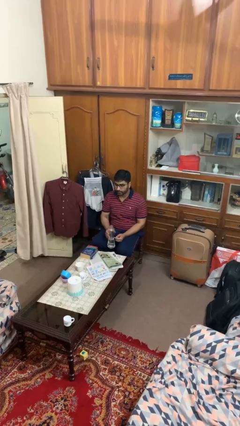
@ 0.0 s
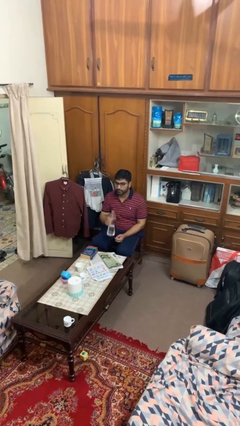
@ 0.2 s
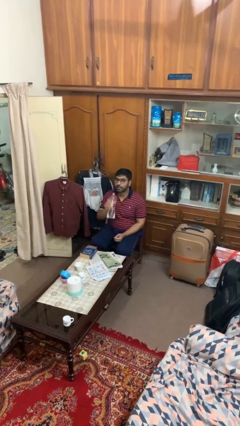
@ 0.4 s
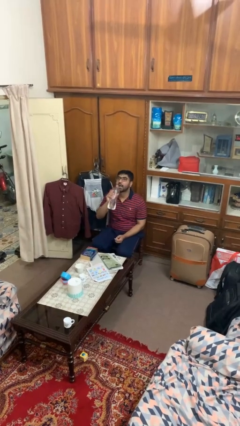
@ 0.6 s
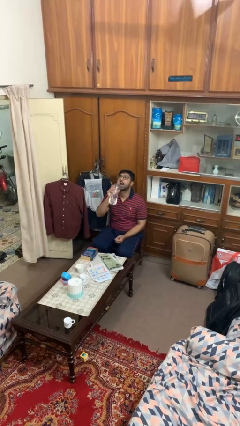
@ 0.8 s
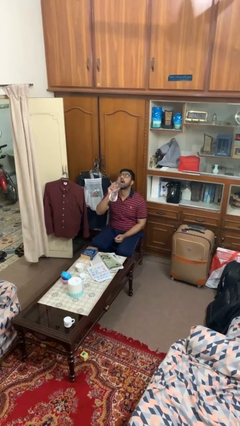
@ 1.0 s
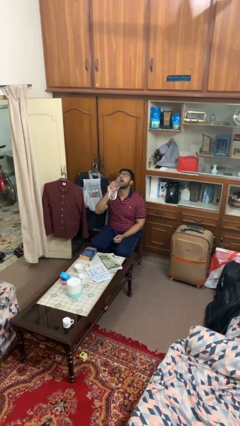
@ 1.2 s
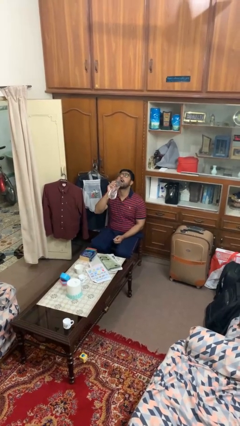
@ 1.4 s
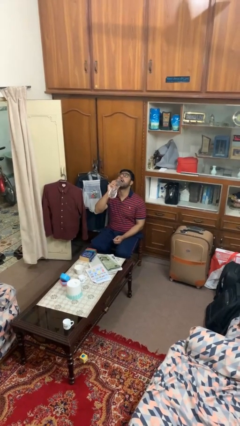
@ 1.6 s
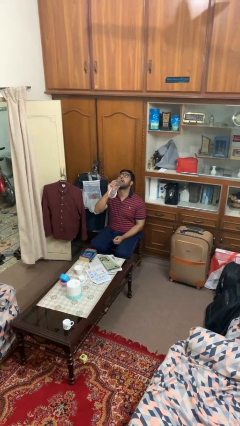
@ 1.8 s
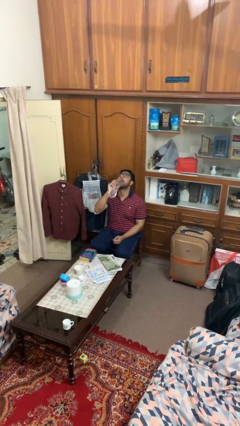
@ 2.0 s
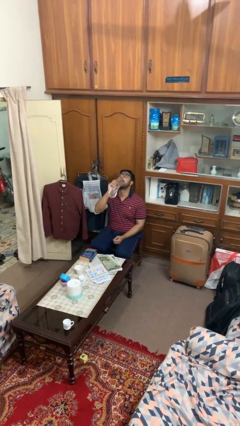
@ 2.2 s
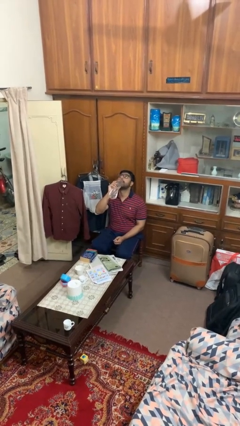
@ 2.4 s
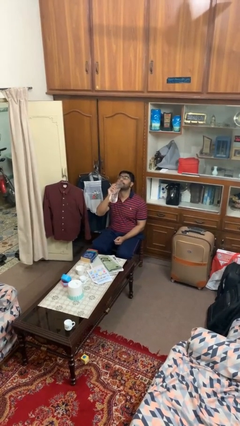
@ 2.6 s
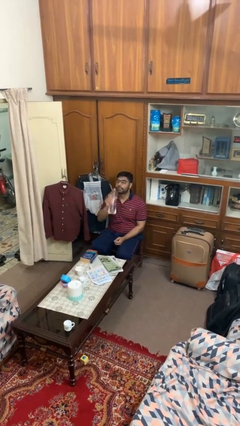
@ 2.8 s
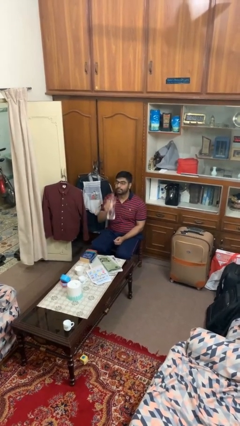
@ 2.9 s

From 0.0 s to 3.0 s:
person drinks from bottle

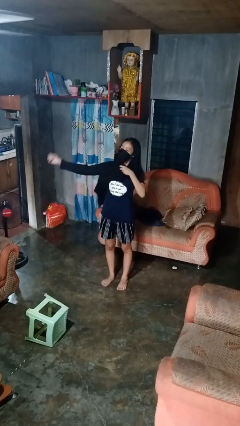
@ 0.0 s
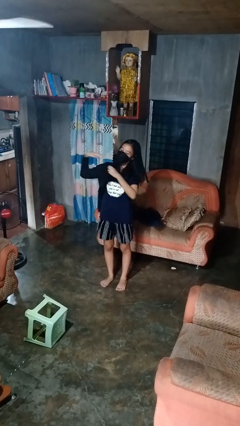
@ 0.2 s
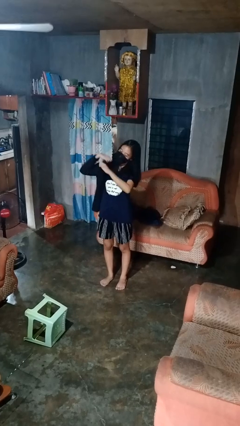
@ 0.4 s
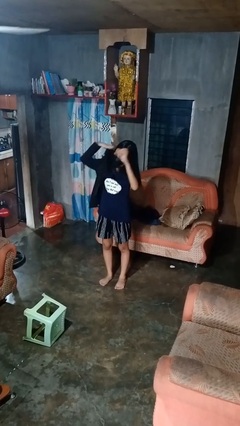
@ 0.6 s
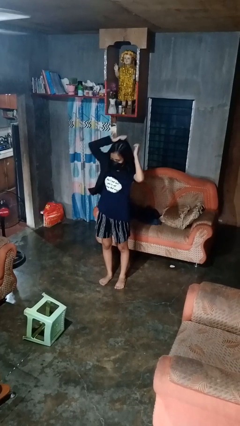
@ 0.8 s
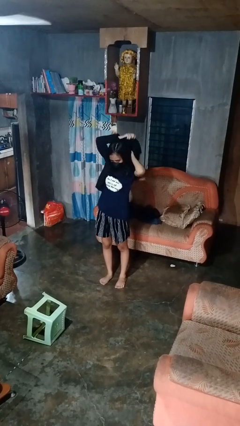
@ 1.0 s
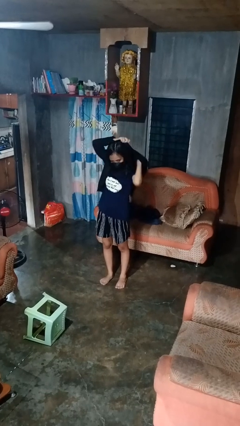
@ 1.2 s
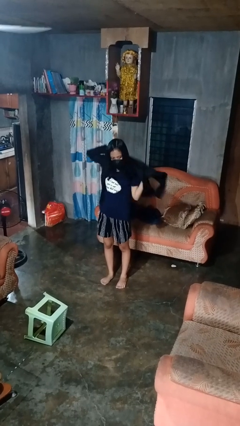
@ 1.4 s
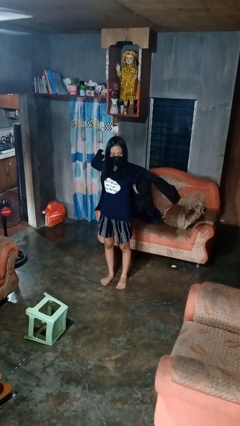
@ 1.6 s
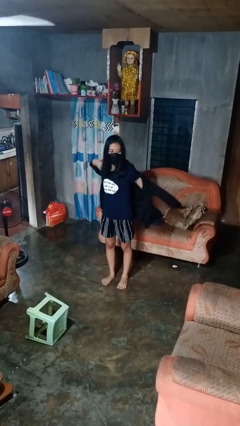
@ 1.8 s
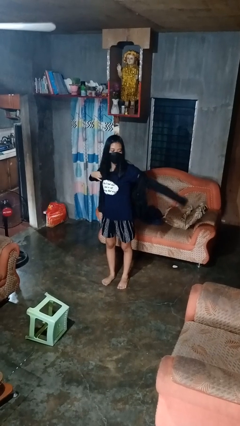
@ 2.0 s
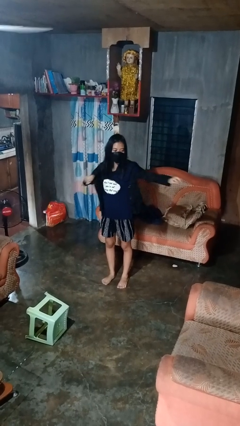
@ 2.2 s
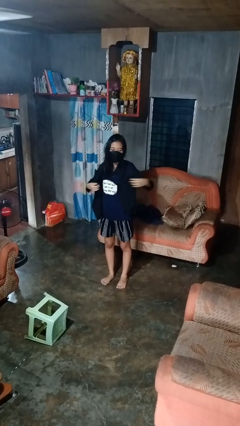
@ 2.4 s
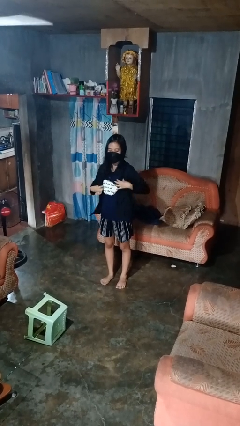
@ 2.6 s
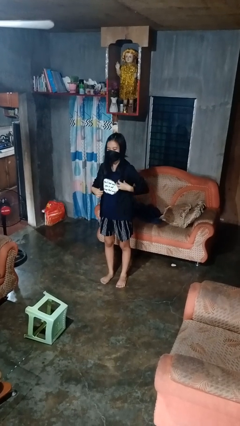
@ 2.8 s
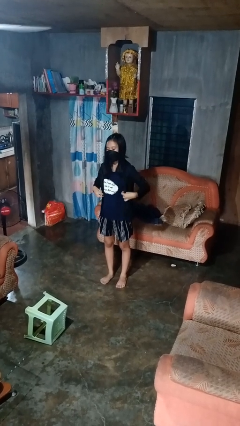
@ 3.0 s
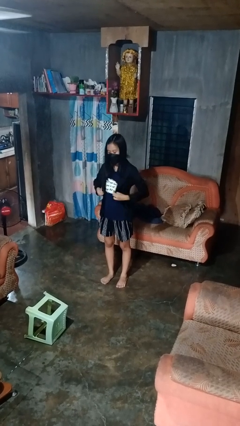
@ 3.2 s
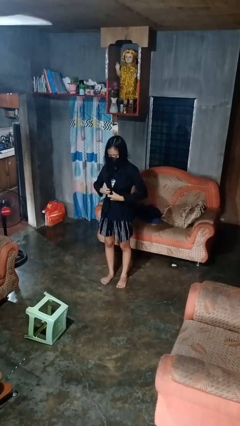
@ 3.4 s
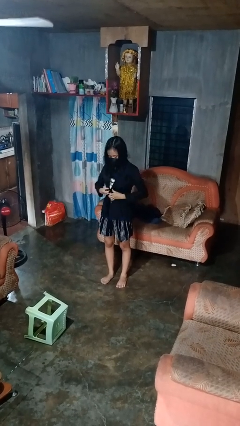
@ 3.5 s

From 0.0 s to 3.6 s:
person puts on shirt

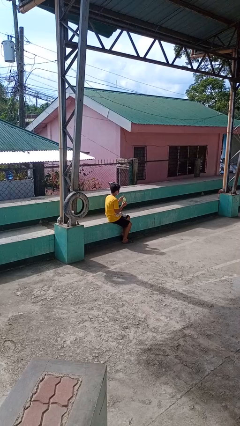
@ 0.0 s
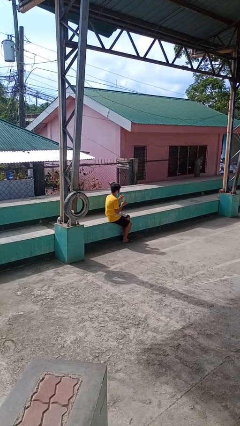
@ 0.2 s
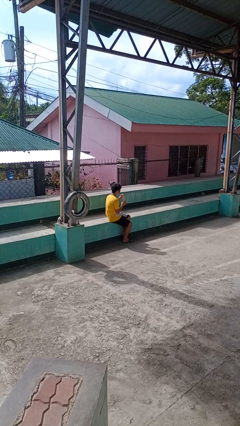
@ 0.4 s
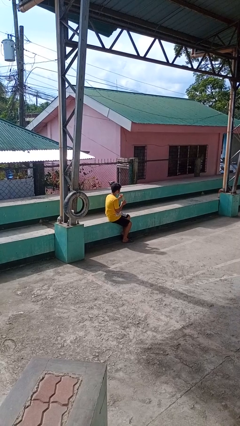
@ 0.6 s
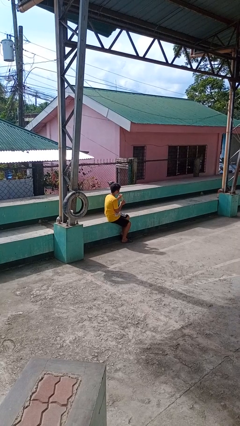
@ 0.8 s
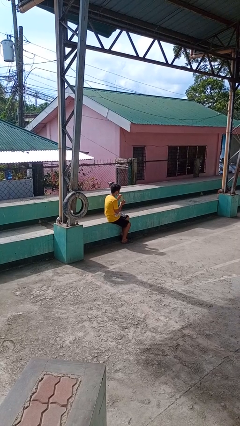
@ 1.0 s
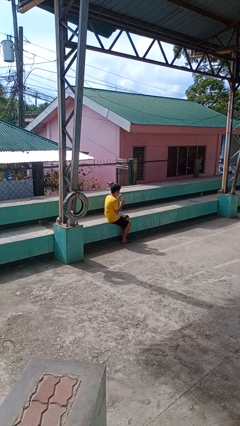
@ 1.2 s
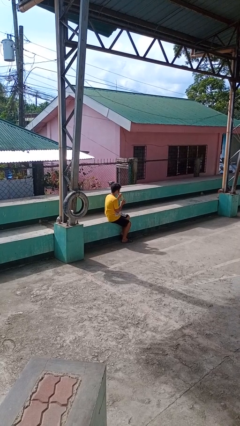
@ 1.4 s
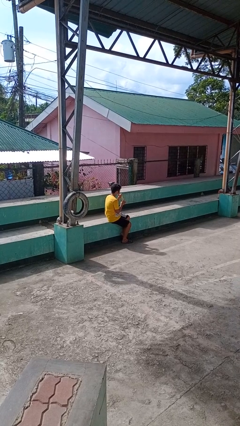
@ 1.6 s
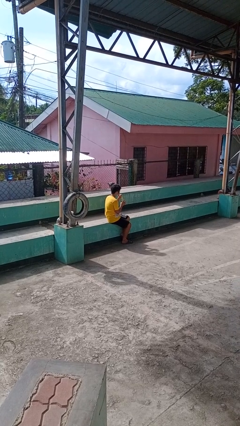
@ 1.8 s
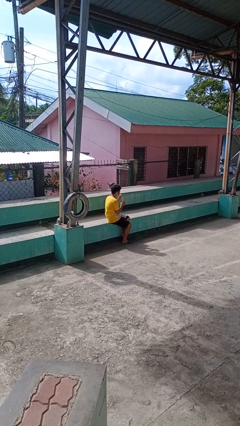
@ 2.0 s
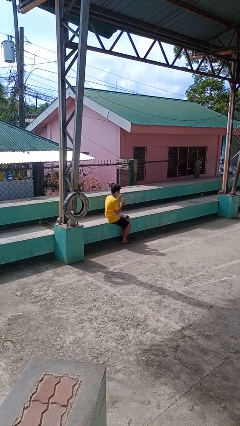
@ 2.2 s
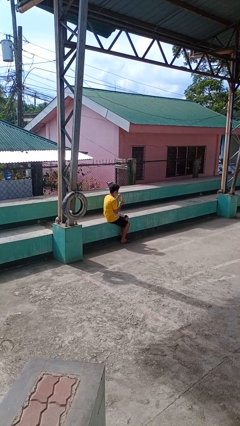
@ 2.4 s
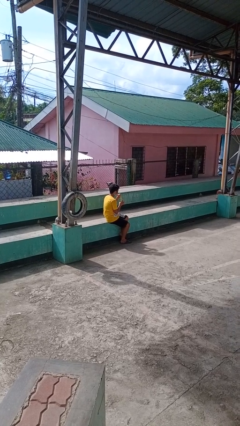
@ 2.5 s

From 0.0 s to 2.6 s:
person drinks from straw

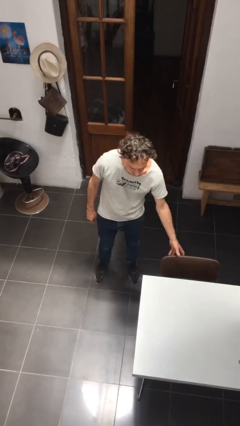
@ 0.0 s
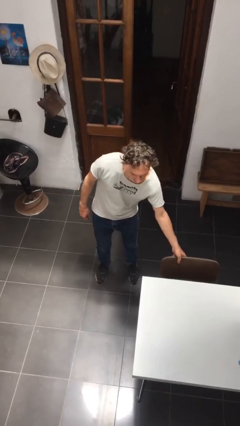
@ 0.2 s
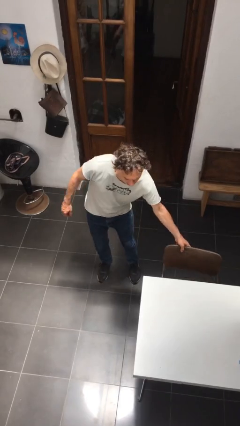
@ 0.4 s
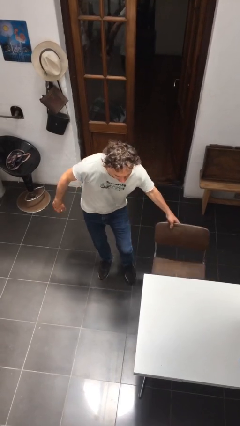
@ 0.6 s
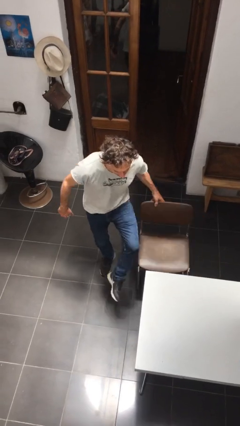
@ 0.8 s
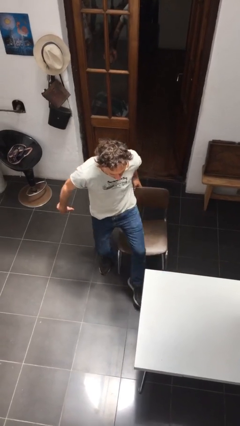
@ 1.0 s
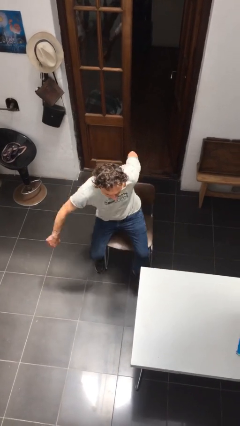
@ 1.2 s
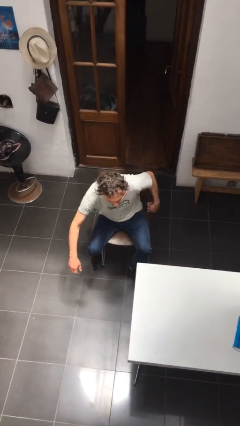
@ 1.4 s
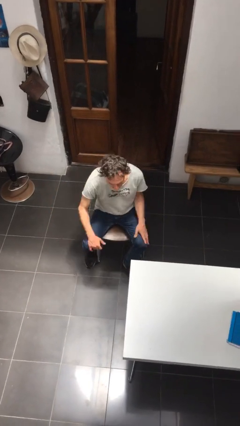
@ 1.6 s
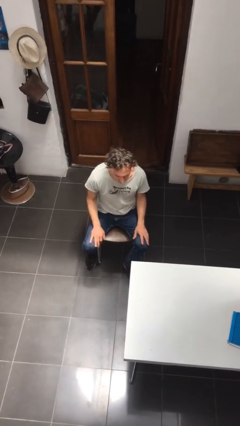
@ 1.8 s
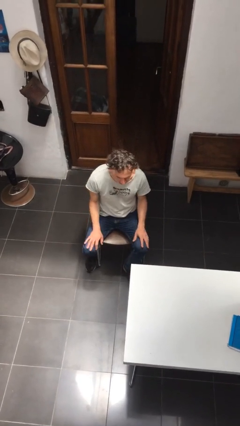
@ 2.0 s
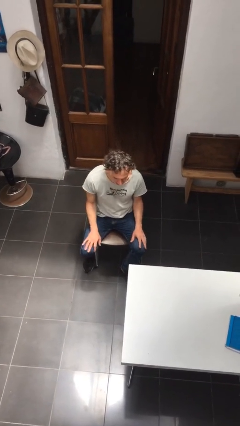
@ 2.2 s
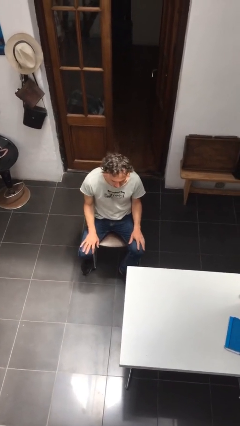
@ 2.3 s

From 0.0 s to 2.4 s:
person sits down

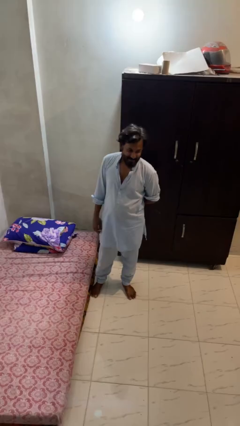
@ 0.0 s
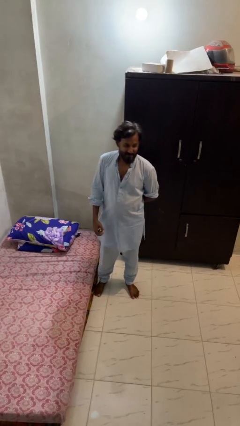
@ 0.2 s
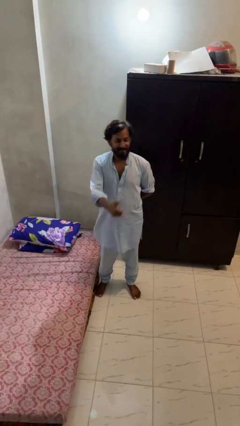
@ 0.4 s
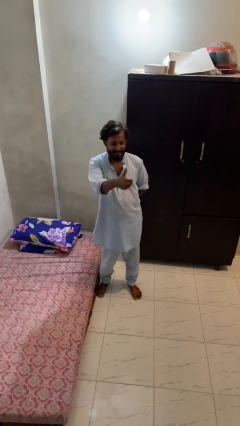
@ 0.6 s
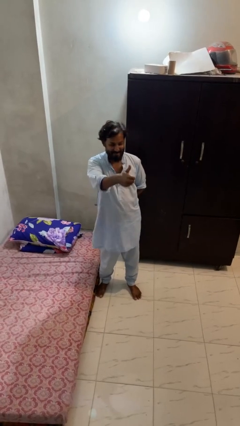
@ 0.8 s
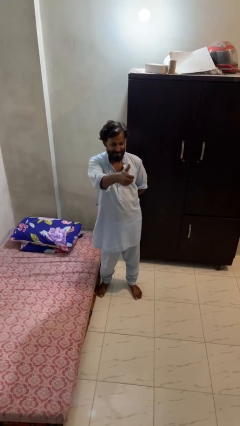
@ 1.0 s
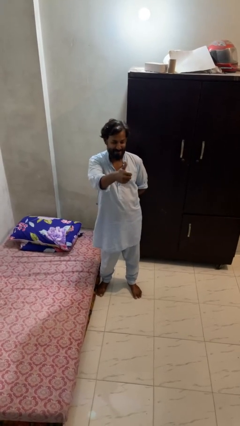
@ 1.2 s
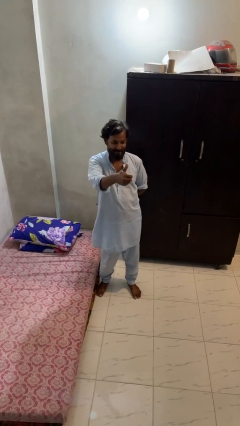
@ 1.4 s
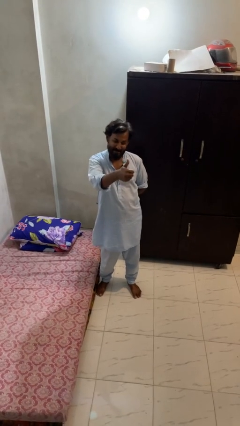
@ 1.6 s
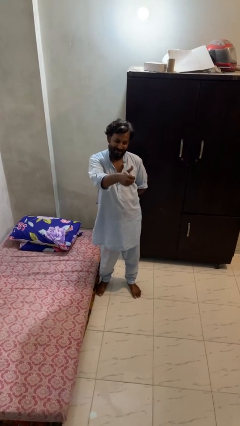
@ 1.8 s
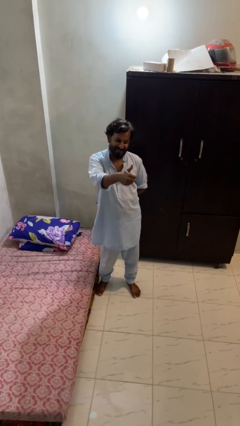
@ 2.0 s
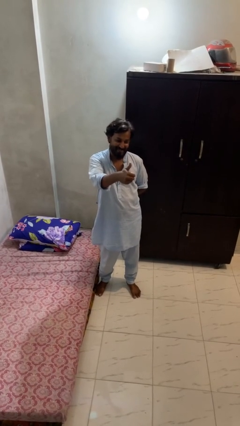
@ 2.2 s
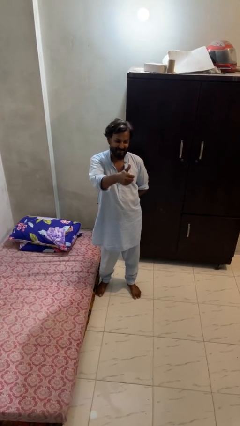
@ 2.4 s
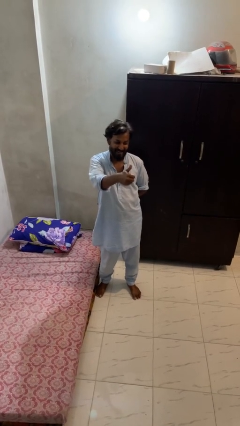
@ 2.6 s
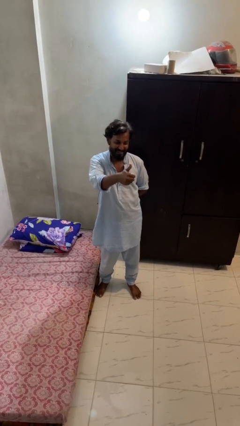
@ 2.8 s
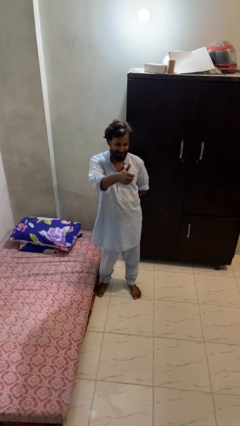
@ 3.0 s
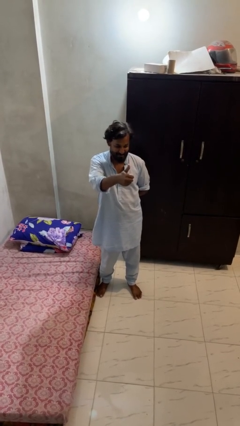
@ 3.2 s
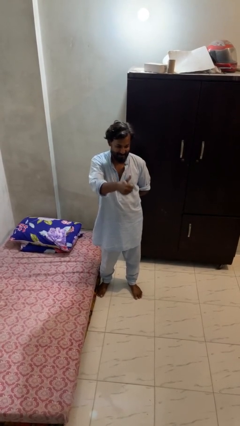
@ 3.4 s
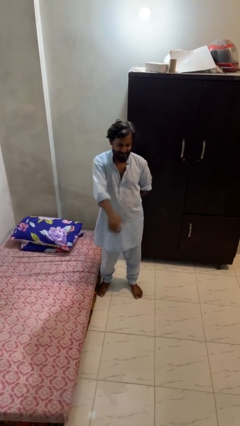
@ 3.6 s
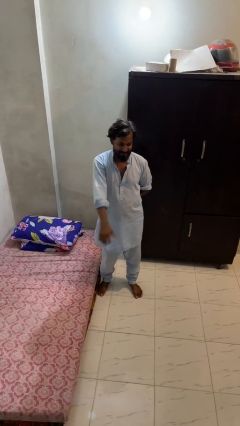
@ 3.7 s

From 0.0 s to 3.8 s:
person gestures thumbs up

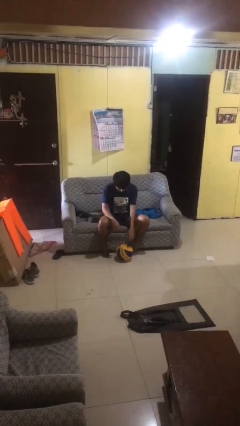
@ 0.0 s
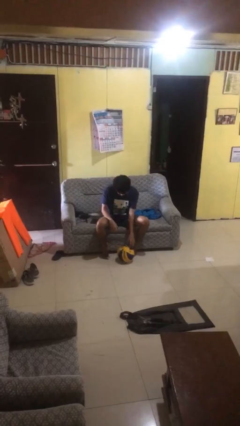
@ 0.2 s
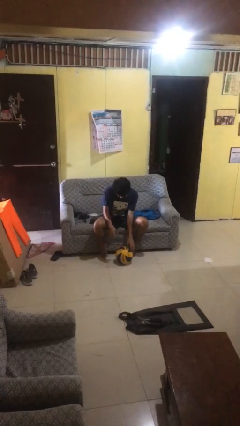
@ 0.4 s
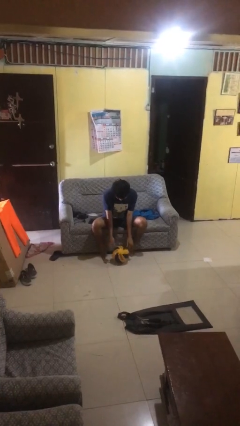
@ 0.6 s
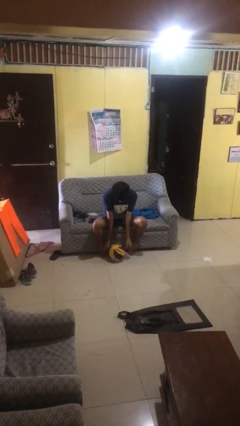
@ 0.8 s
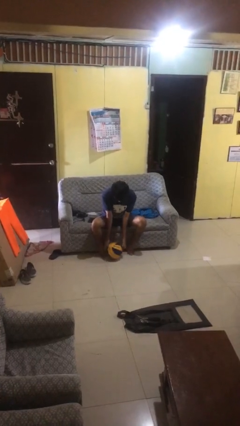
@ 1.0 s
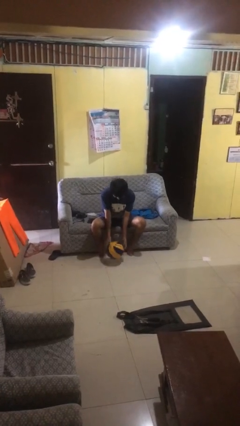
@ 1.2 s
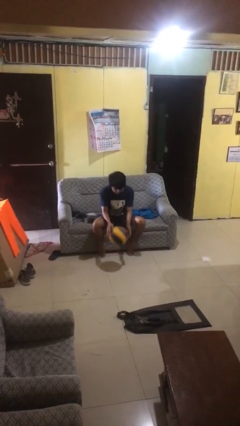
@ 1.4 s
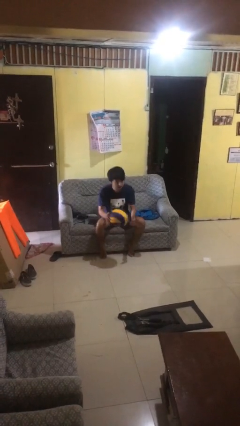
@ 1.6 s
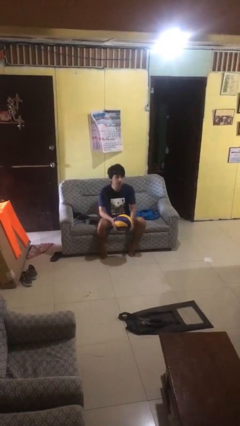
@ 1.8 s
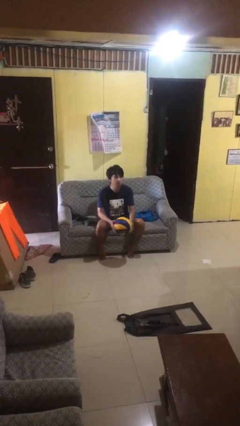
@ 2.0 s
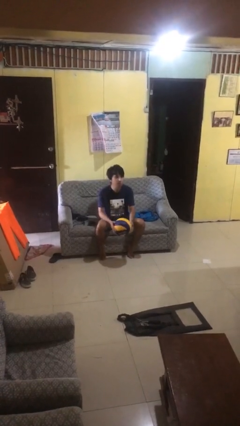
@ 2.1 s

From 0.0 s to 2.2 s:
person picks up object from floor
